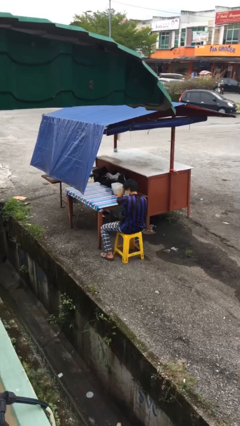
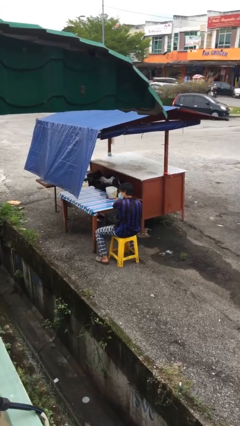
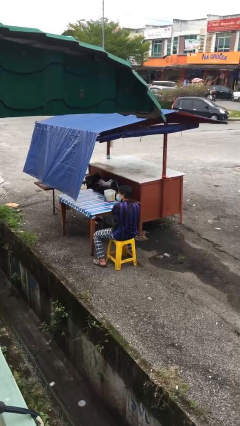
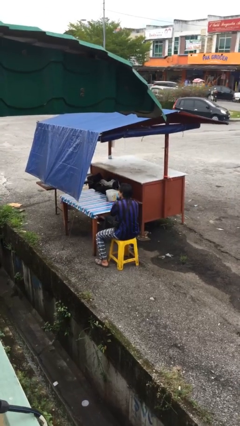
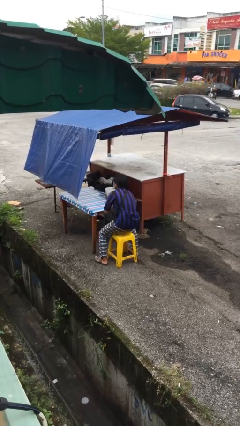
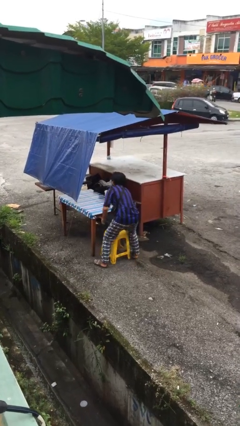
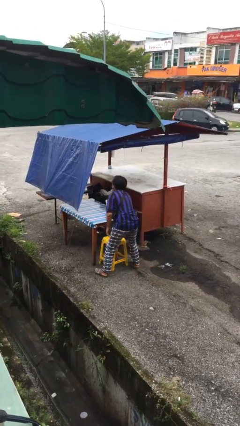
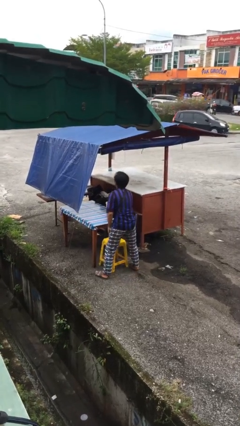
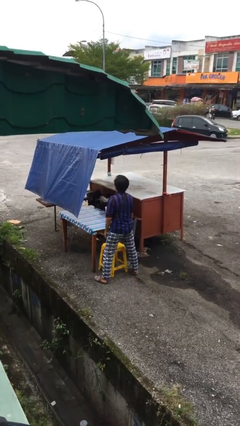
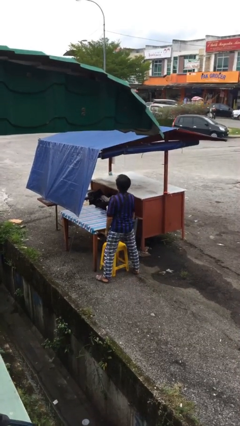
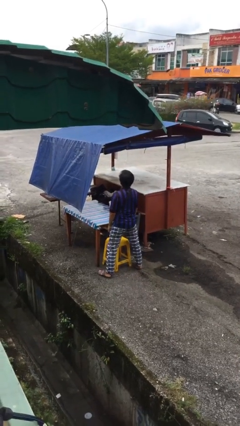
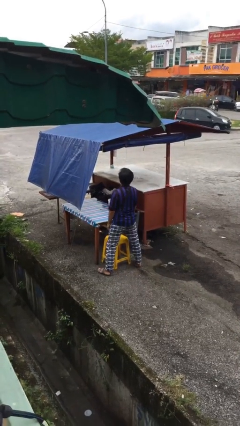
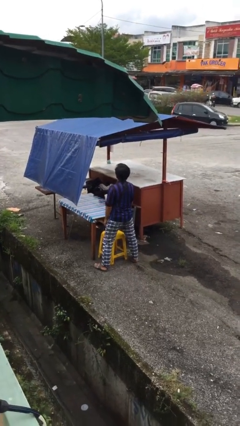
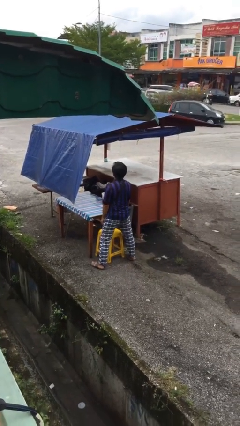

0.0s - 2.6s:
person stands up

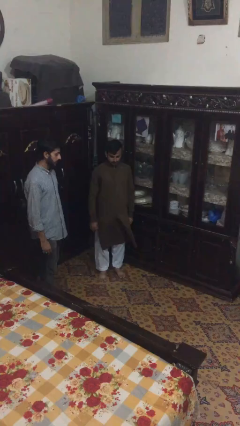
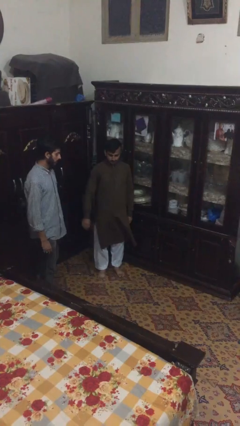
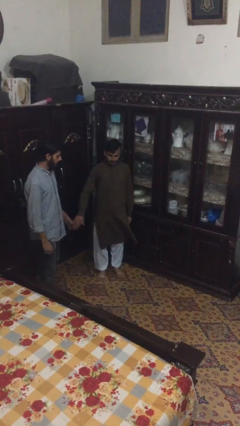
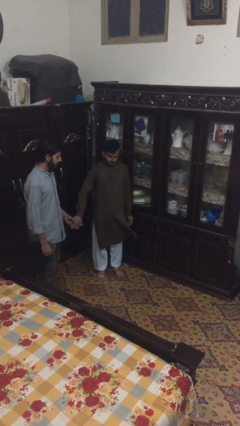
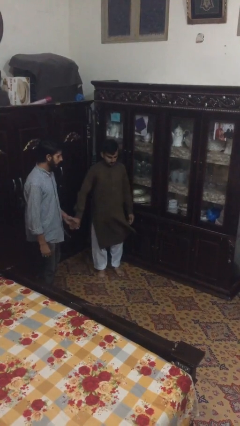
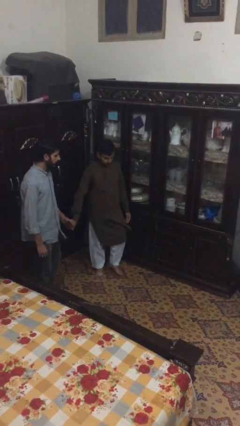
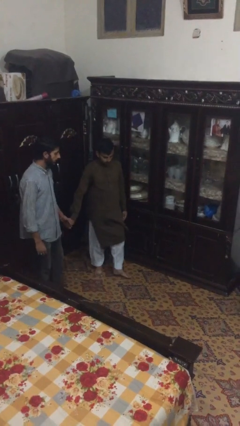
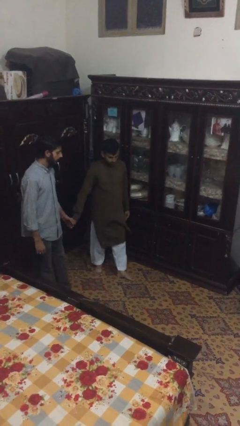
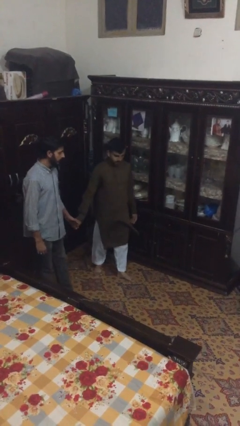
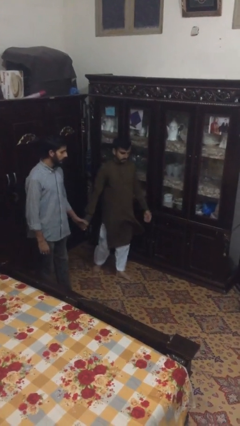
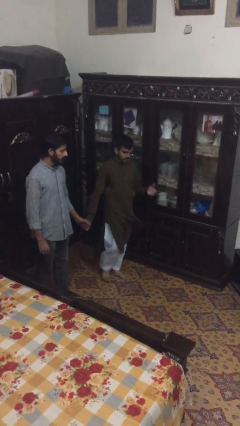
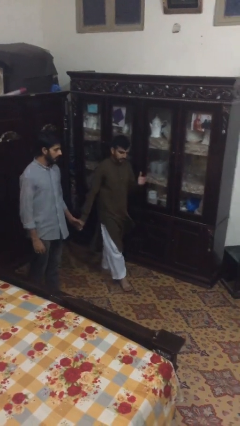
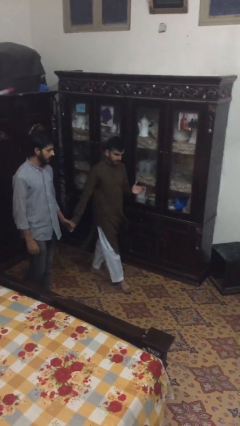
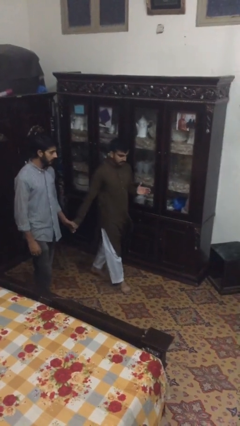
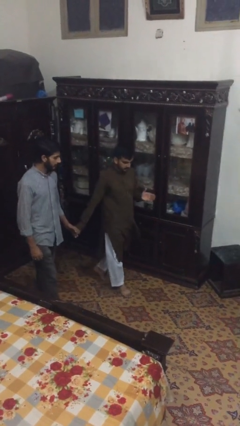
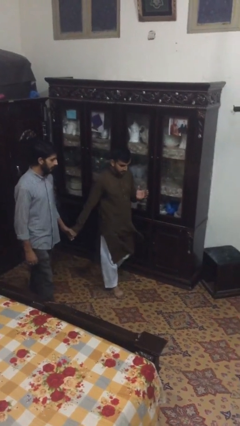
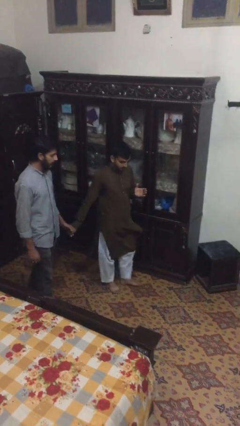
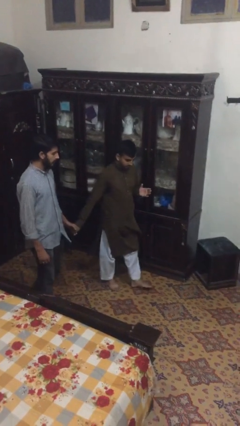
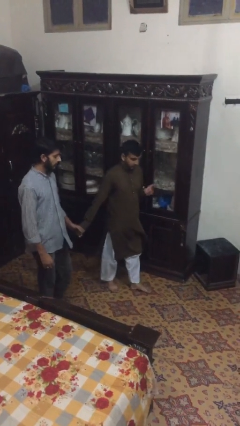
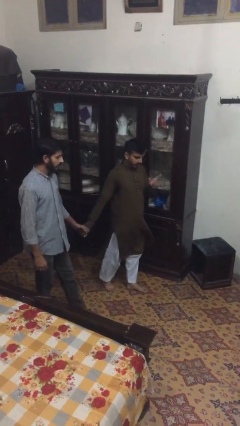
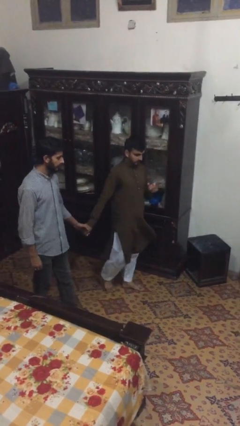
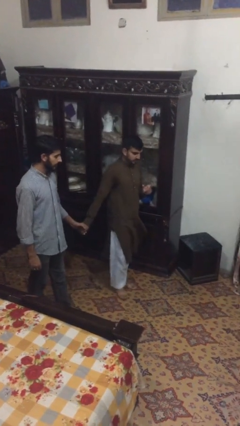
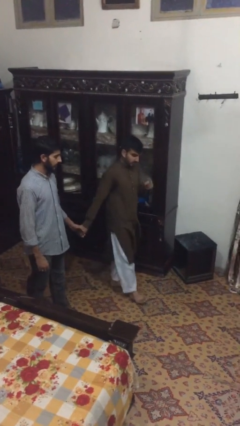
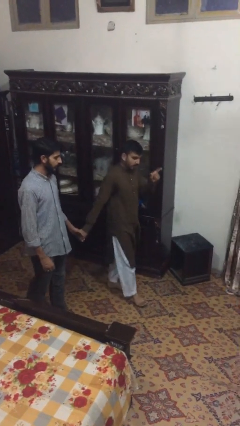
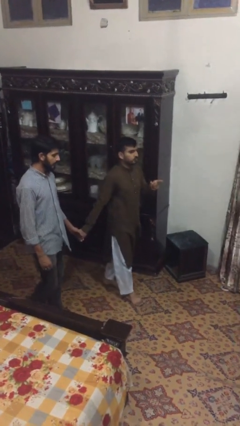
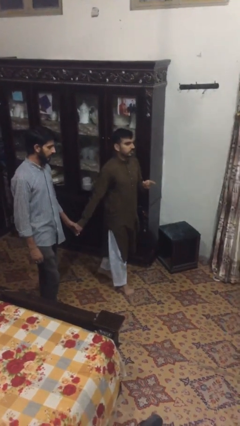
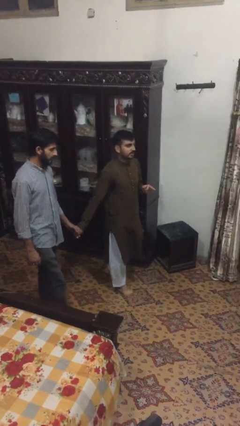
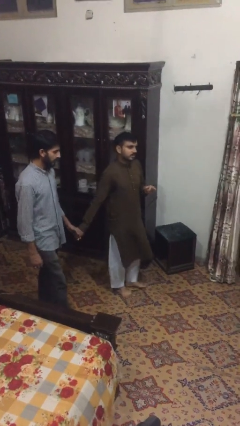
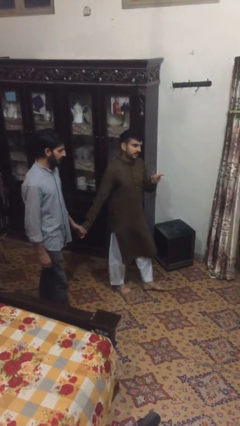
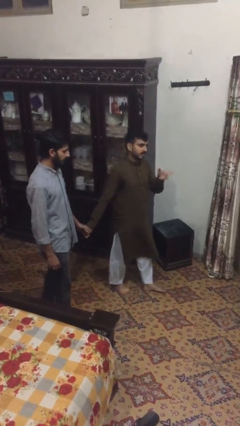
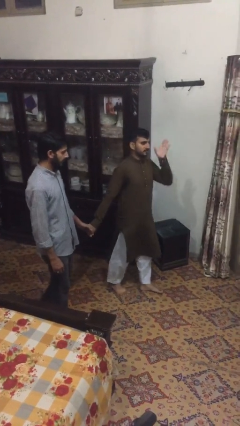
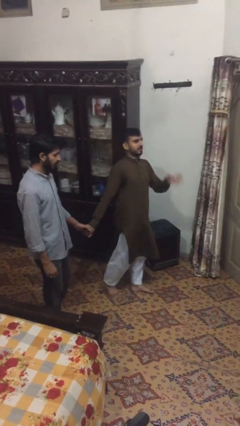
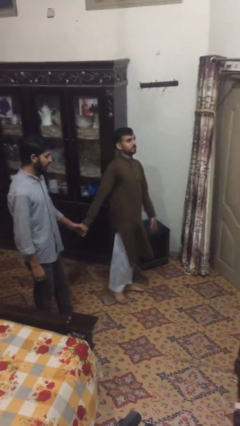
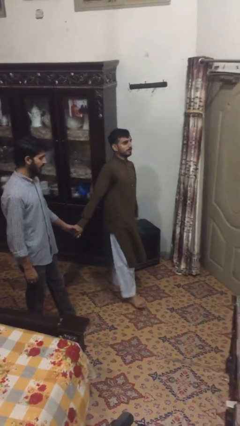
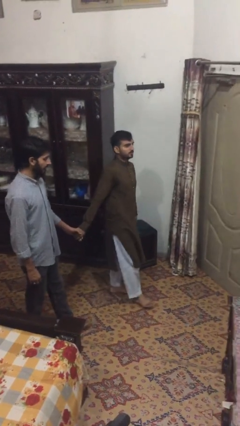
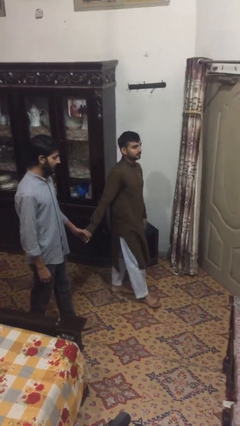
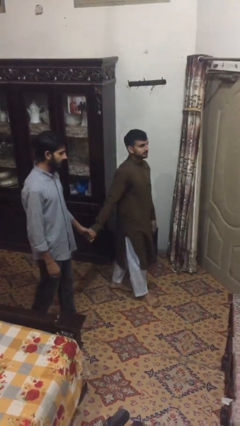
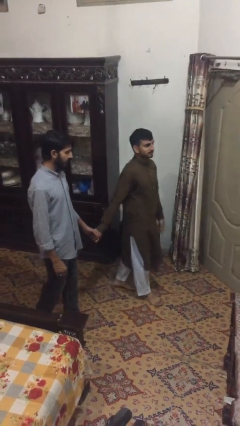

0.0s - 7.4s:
person holds hand

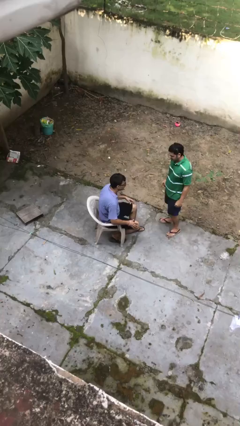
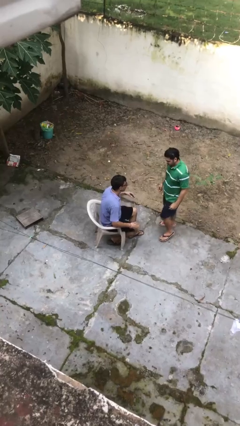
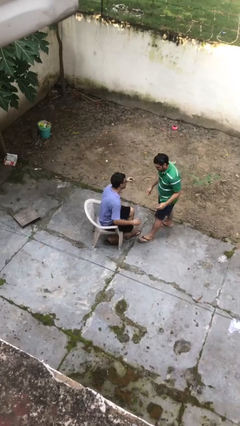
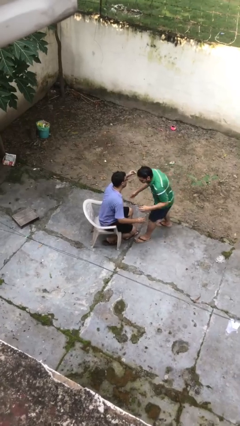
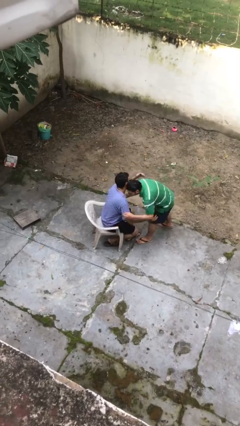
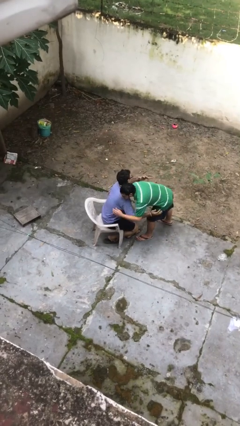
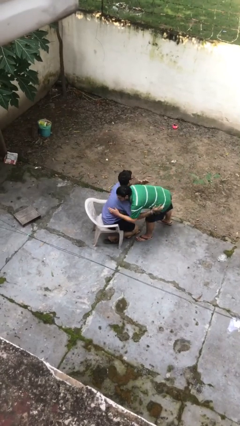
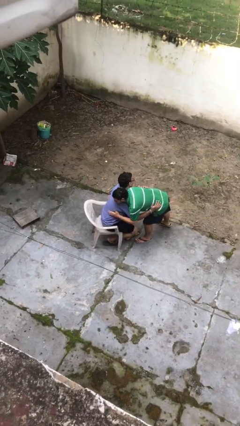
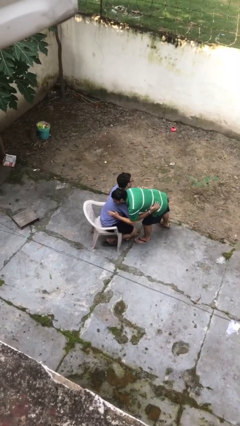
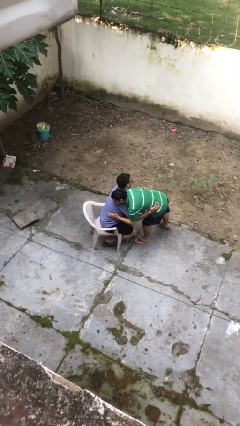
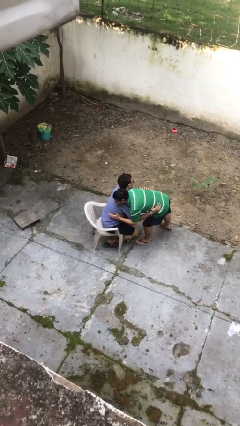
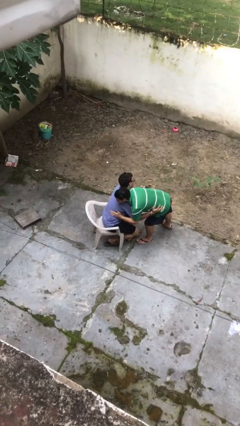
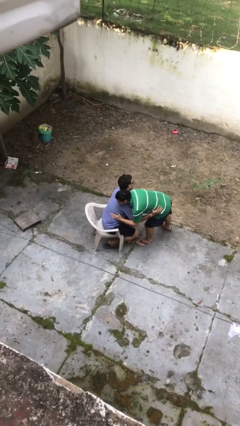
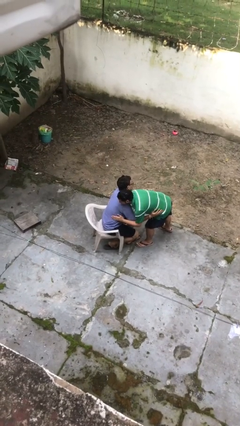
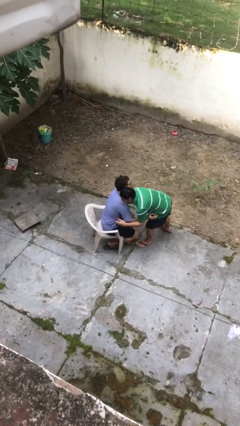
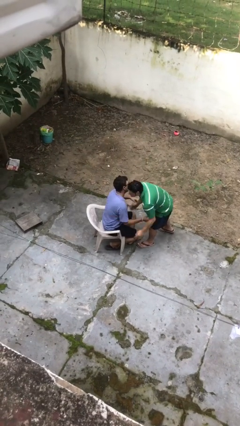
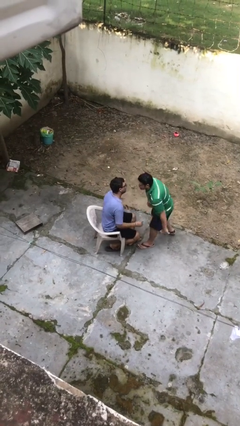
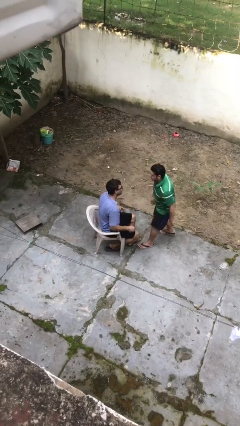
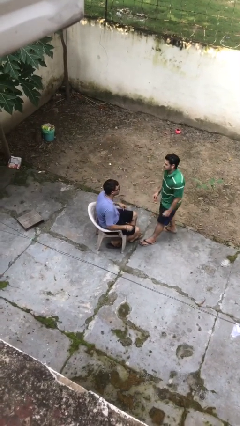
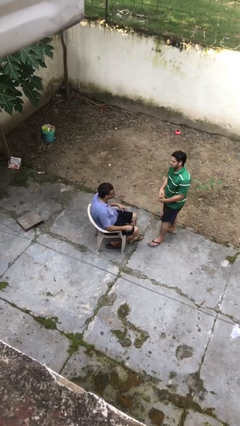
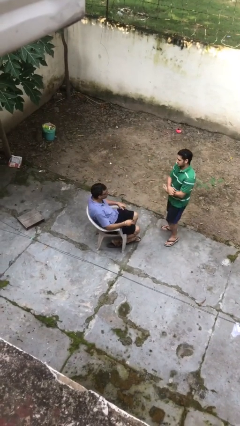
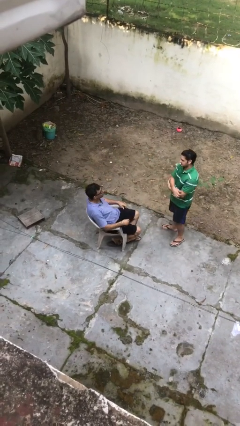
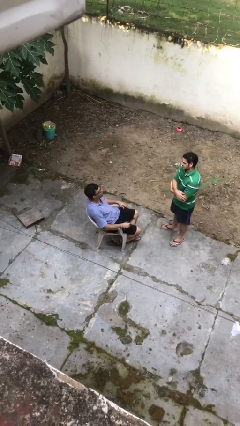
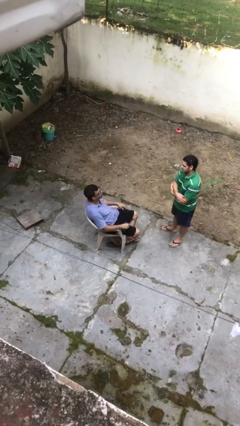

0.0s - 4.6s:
person embraces person

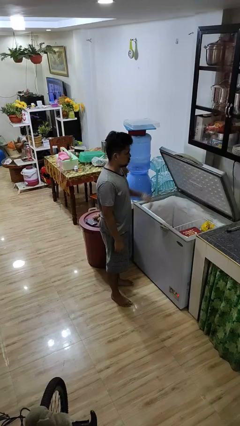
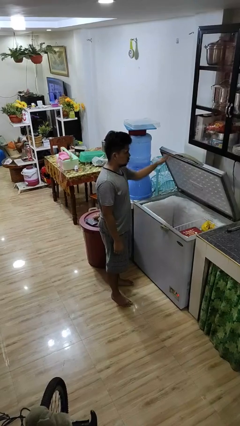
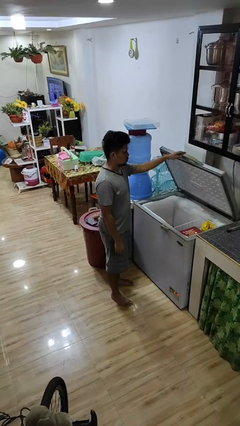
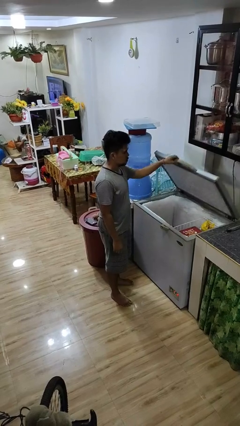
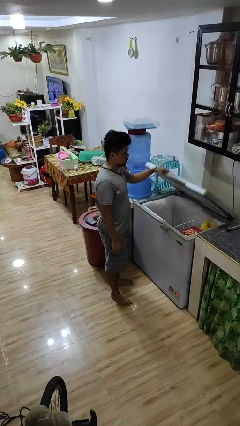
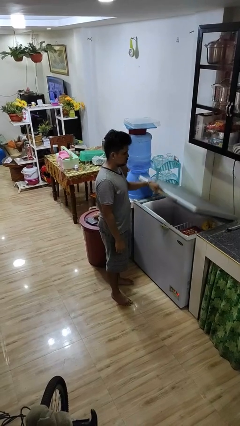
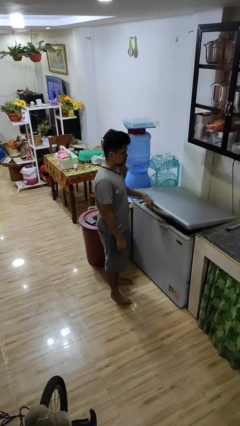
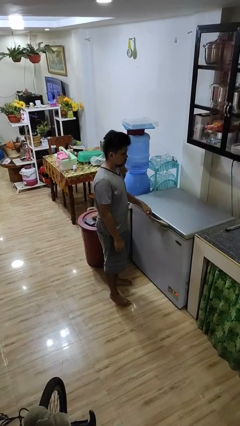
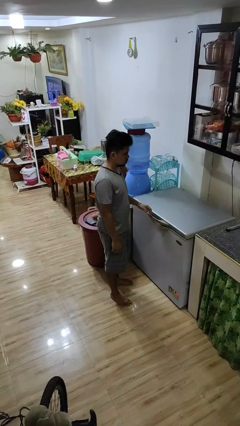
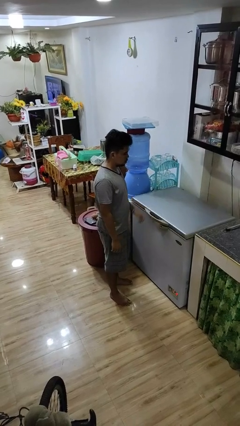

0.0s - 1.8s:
person closes refrigerator

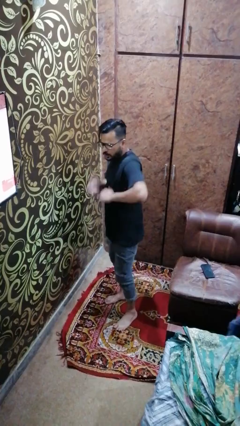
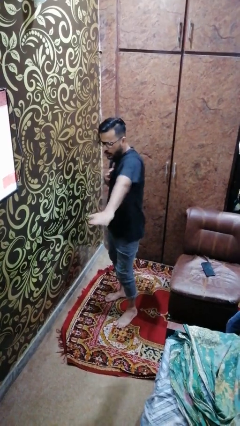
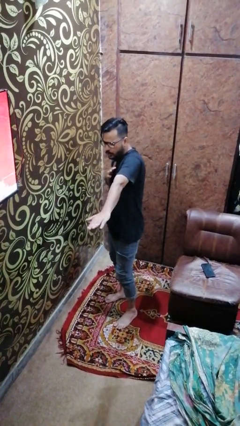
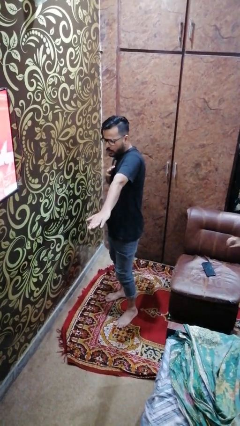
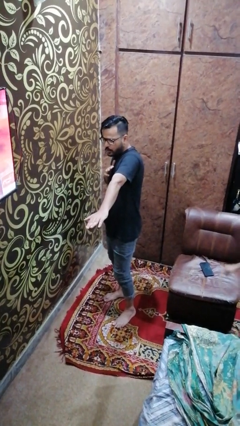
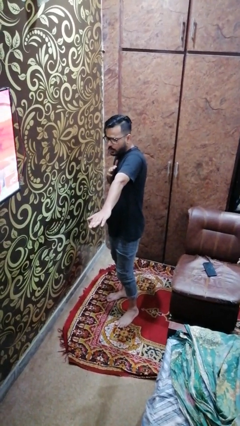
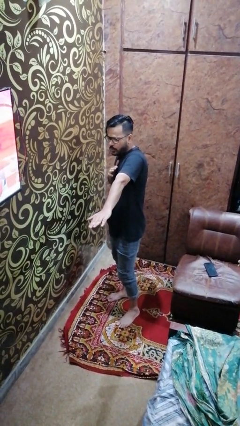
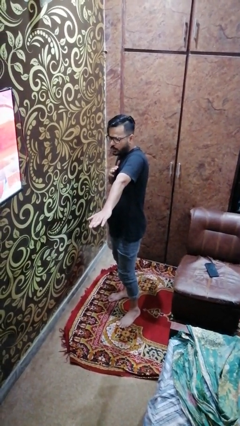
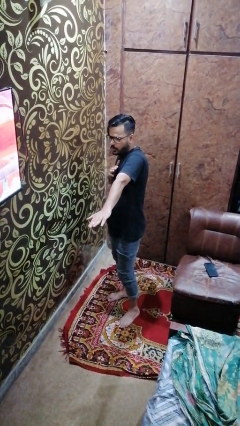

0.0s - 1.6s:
person karate chop
